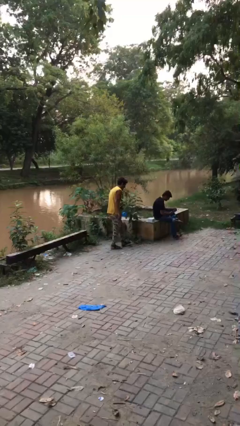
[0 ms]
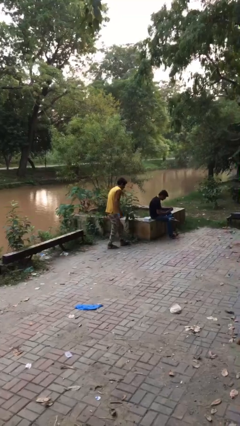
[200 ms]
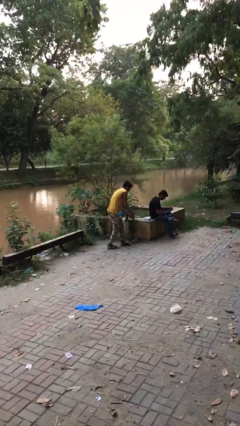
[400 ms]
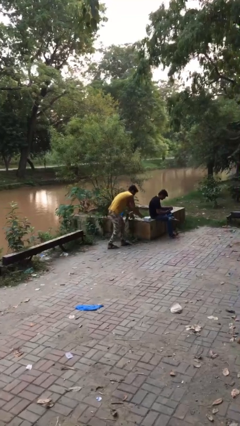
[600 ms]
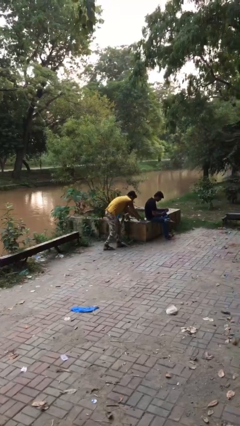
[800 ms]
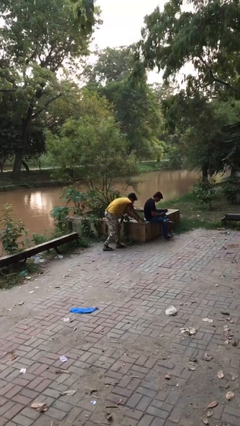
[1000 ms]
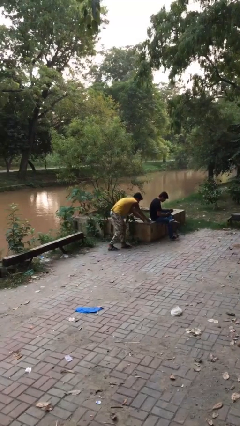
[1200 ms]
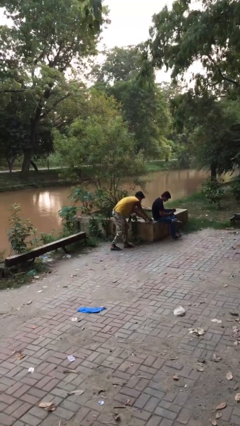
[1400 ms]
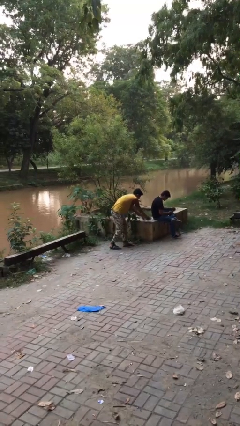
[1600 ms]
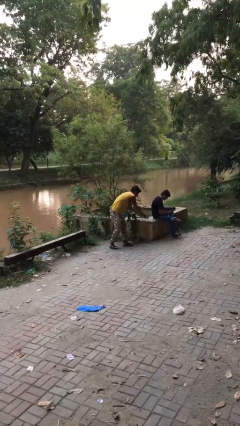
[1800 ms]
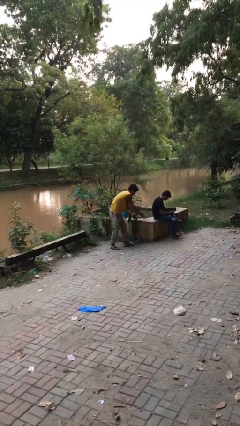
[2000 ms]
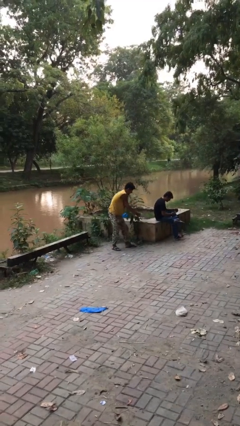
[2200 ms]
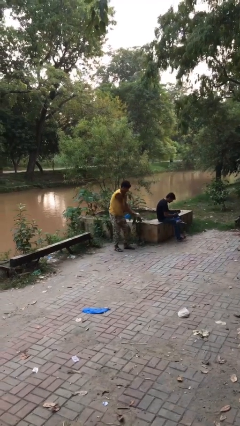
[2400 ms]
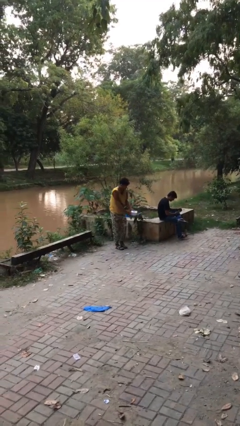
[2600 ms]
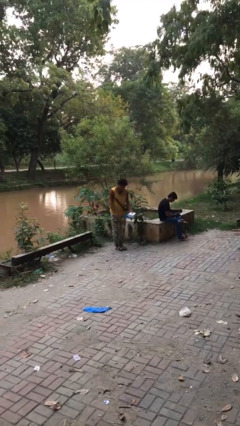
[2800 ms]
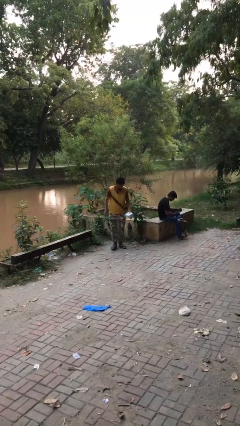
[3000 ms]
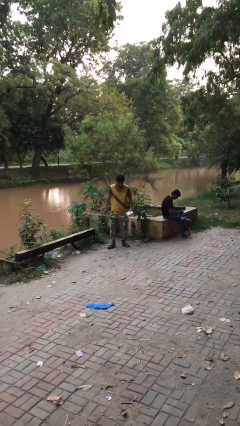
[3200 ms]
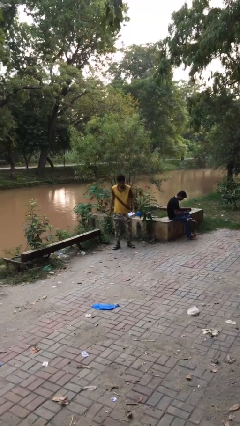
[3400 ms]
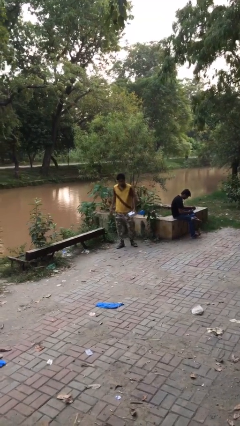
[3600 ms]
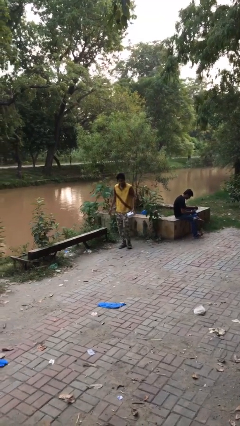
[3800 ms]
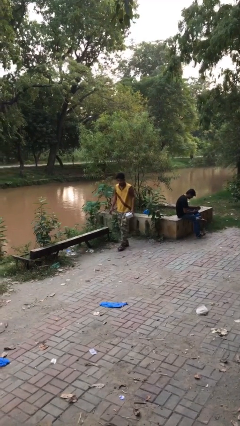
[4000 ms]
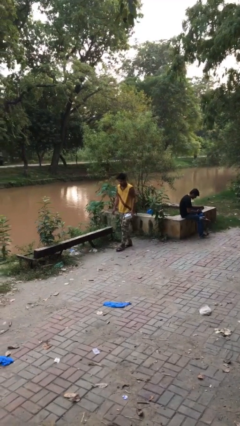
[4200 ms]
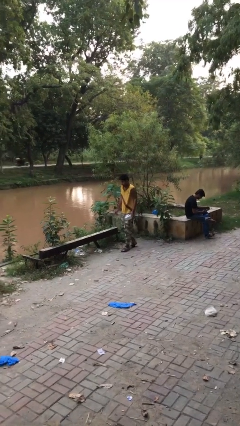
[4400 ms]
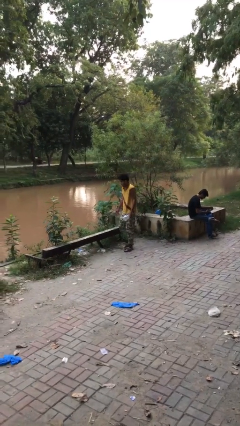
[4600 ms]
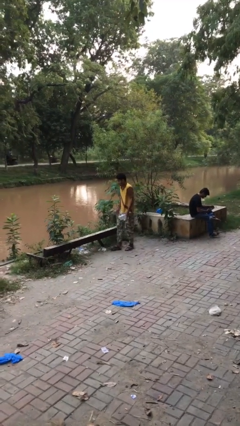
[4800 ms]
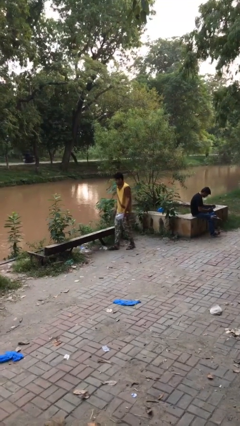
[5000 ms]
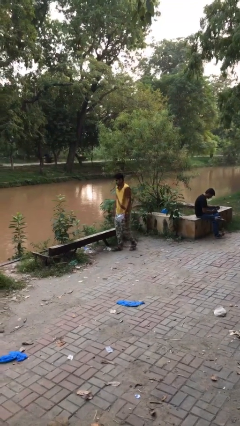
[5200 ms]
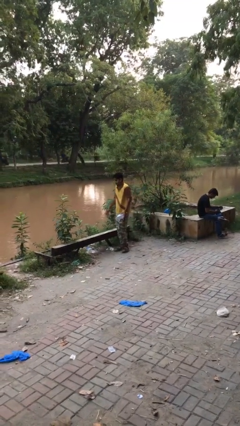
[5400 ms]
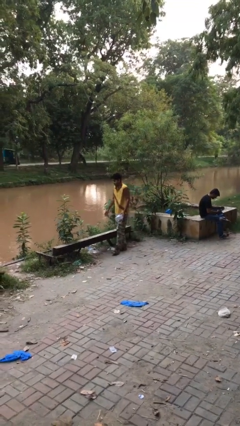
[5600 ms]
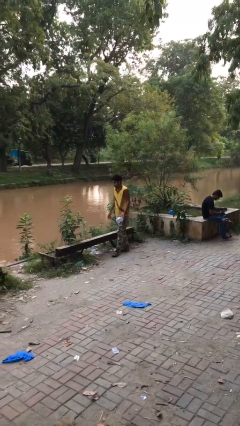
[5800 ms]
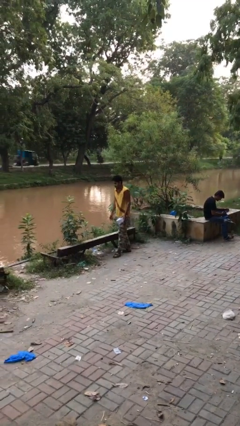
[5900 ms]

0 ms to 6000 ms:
person steals object from person

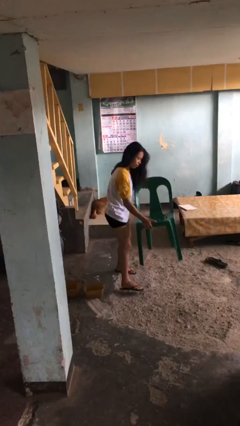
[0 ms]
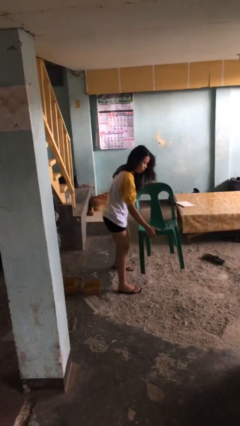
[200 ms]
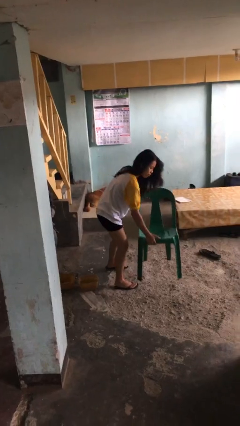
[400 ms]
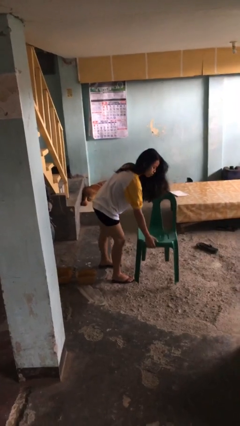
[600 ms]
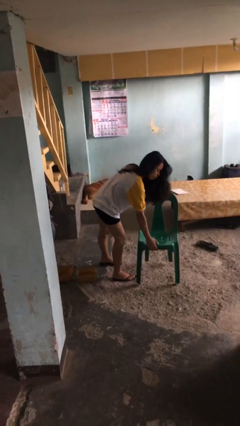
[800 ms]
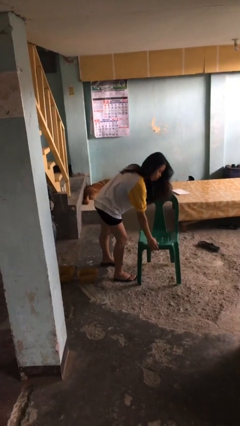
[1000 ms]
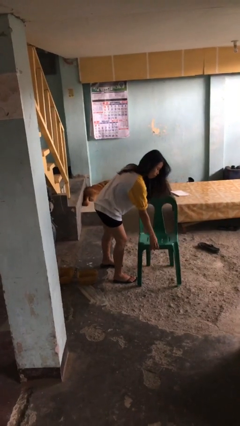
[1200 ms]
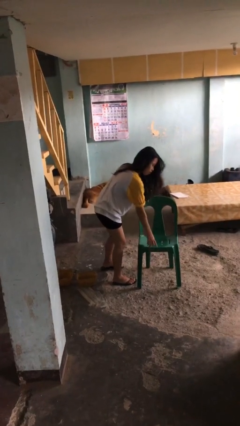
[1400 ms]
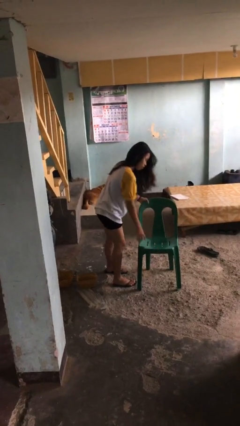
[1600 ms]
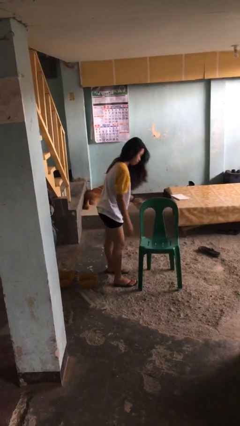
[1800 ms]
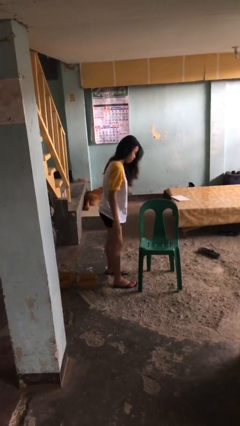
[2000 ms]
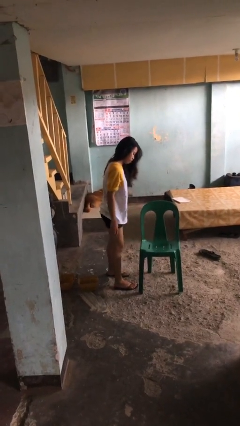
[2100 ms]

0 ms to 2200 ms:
person puts down object on floor

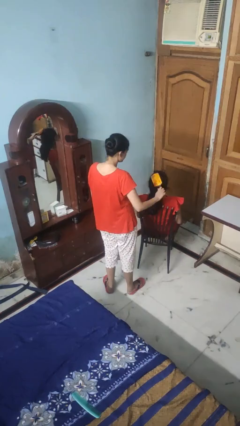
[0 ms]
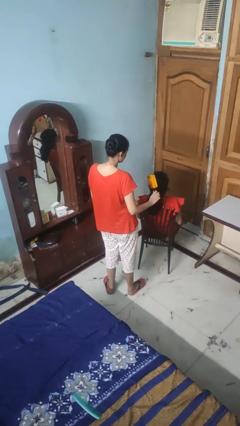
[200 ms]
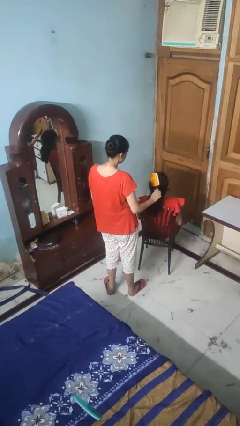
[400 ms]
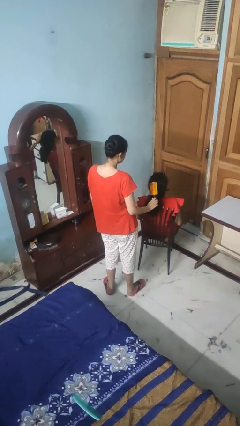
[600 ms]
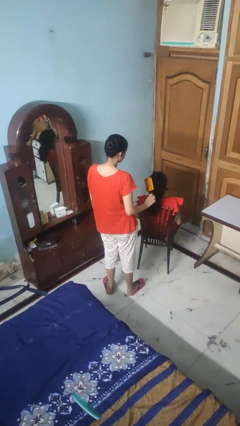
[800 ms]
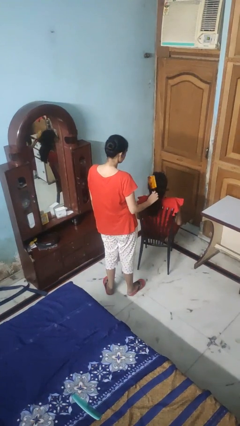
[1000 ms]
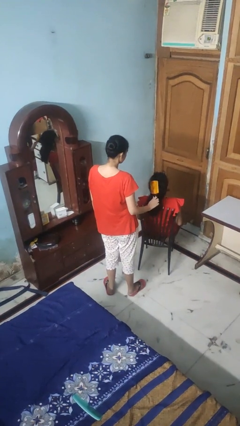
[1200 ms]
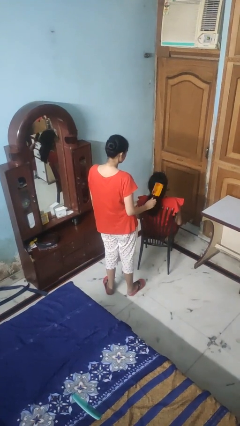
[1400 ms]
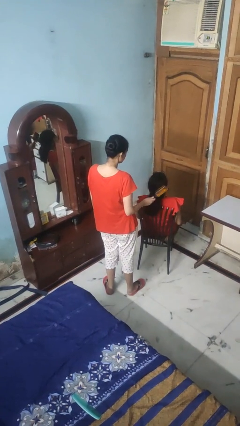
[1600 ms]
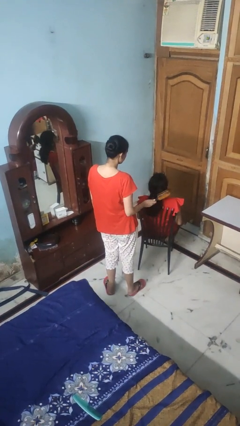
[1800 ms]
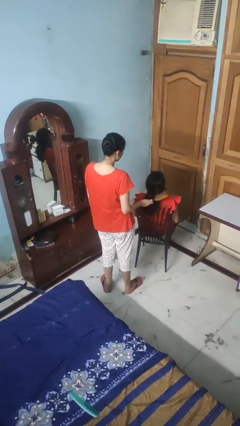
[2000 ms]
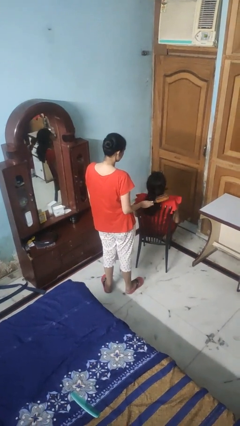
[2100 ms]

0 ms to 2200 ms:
person brushes hair of person

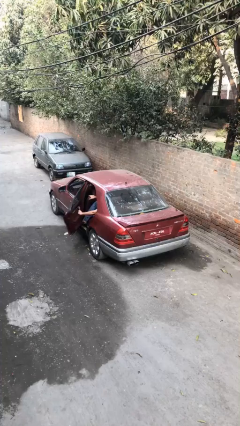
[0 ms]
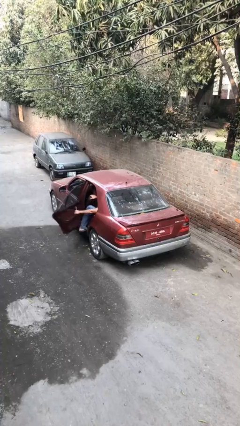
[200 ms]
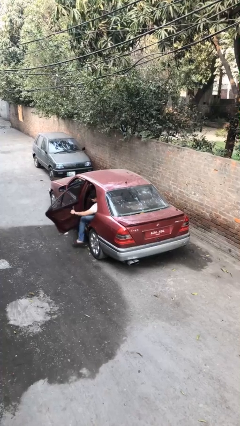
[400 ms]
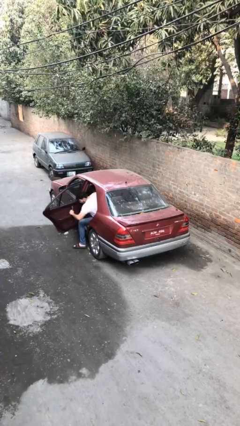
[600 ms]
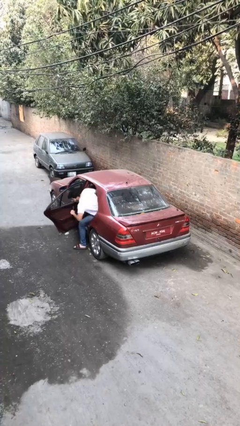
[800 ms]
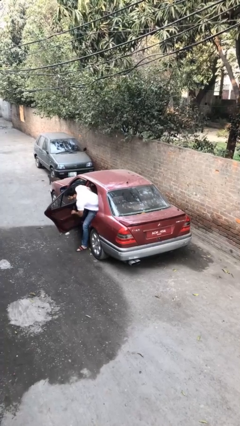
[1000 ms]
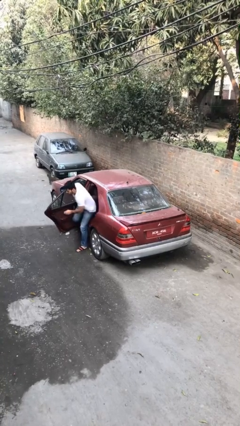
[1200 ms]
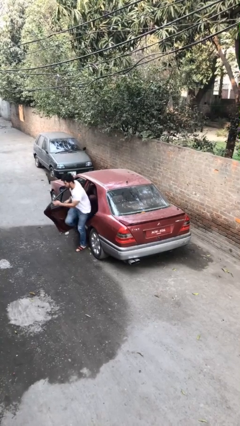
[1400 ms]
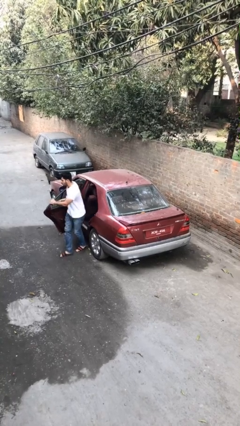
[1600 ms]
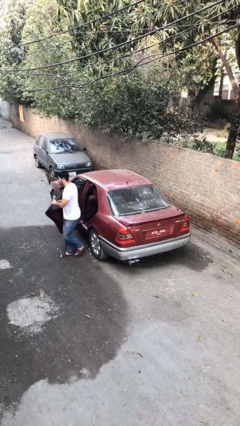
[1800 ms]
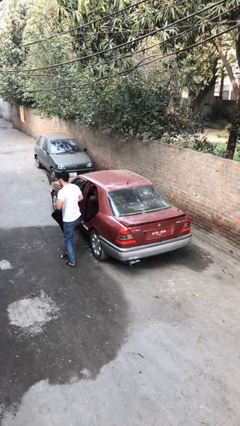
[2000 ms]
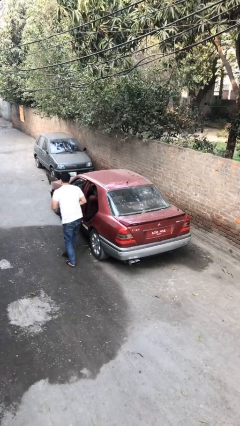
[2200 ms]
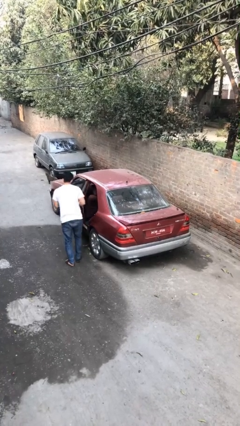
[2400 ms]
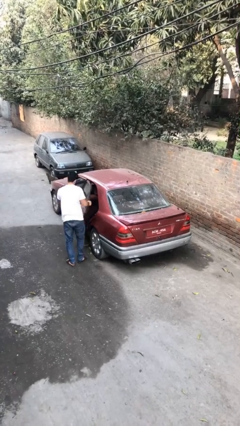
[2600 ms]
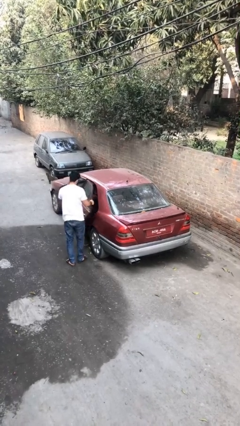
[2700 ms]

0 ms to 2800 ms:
car drops off person

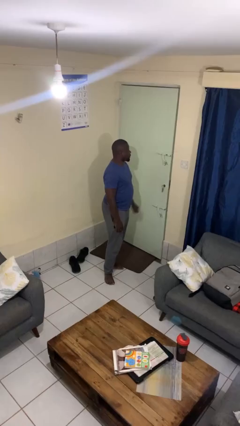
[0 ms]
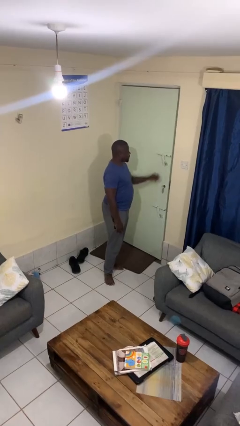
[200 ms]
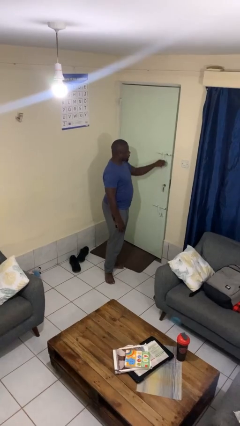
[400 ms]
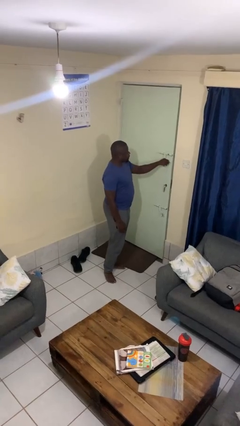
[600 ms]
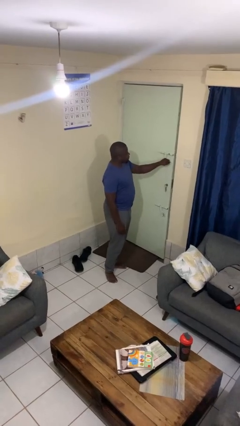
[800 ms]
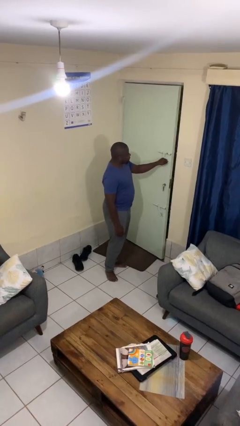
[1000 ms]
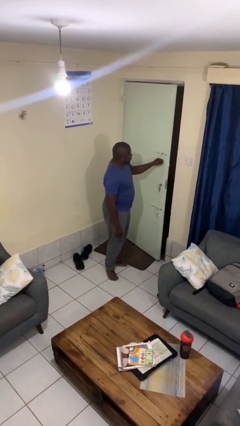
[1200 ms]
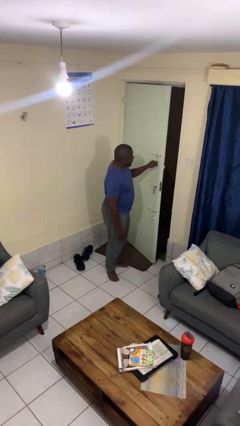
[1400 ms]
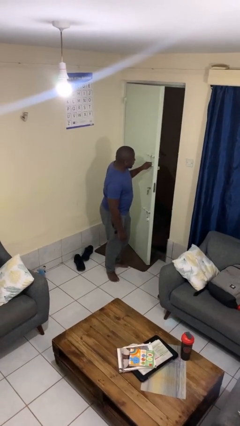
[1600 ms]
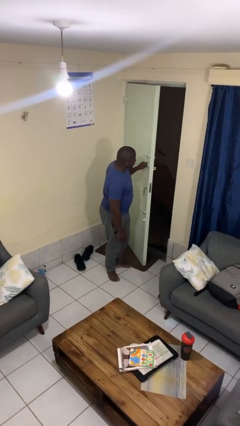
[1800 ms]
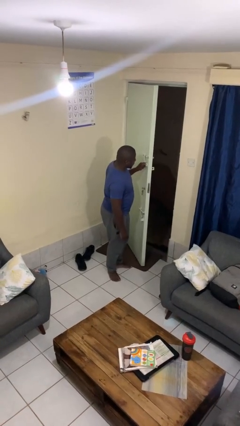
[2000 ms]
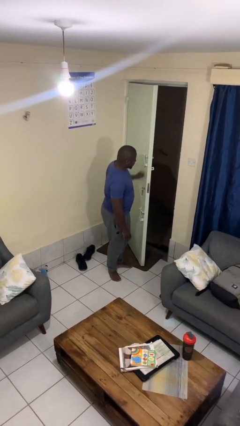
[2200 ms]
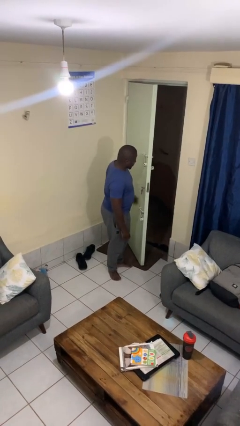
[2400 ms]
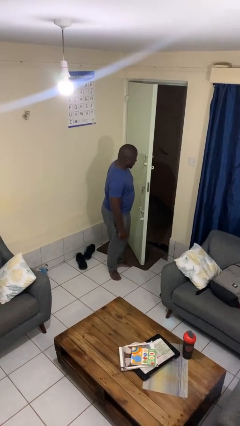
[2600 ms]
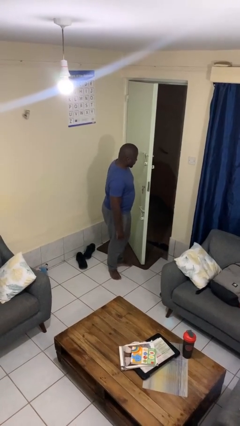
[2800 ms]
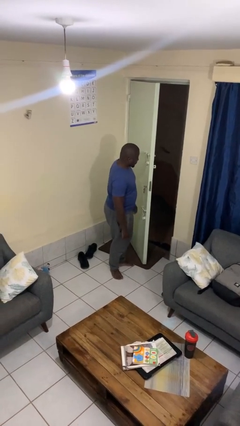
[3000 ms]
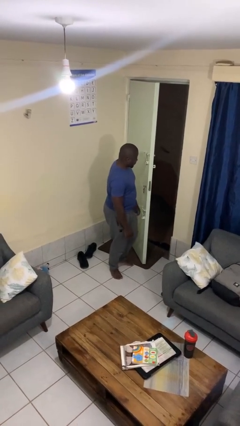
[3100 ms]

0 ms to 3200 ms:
person opens facility door

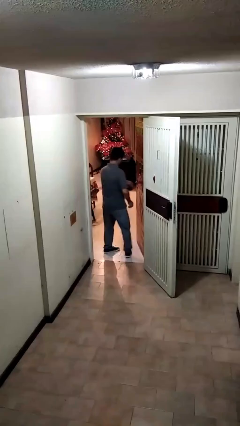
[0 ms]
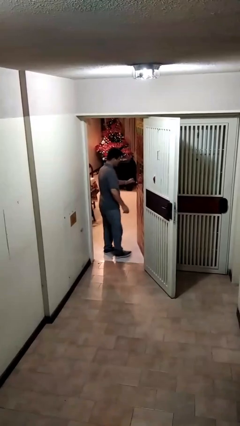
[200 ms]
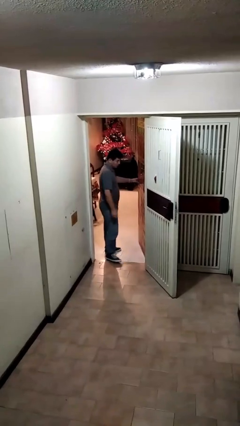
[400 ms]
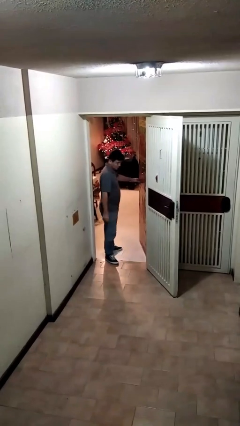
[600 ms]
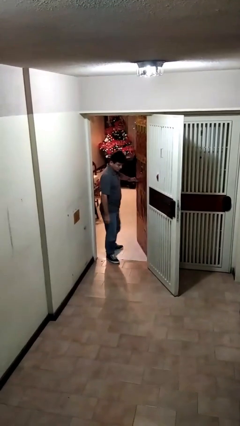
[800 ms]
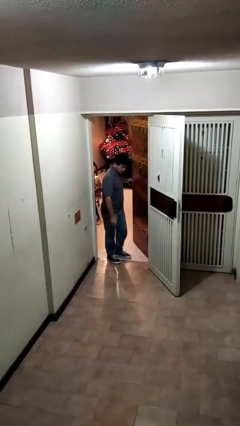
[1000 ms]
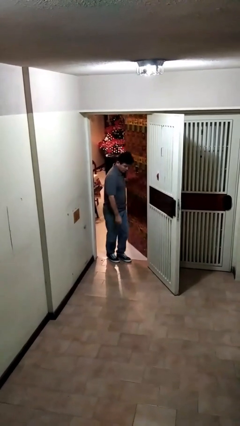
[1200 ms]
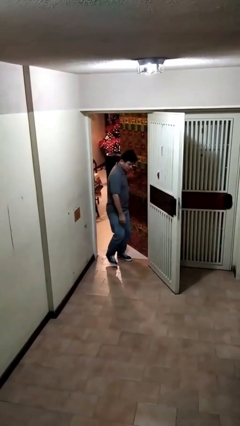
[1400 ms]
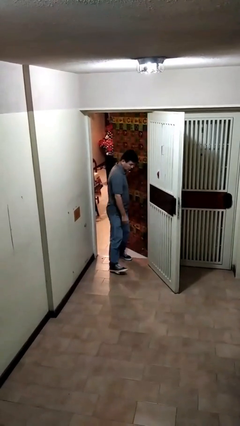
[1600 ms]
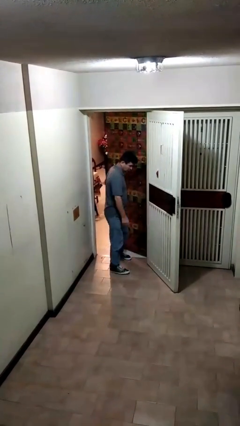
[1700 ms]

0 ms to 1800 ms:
person closes facility door
